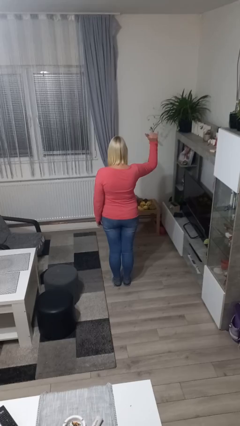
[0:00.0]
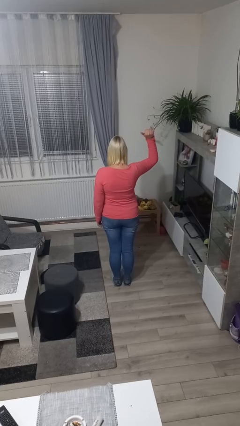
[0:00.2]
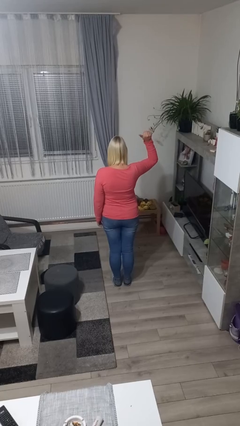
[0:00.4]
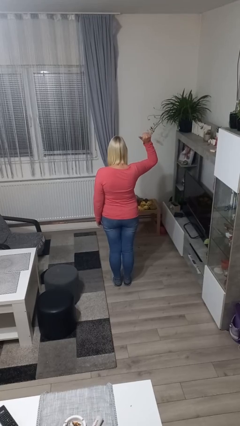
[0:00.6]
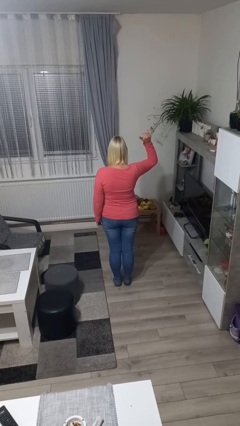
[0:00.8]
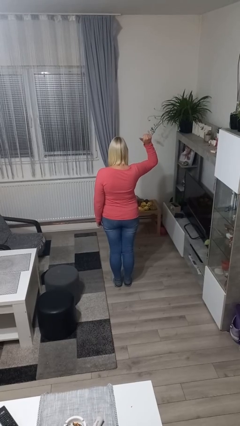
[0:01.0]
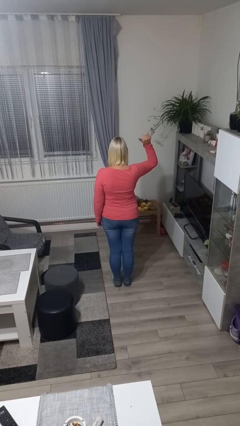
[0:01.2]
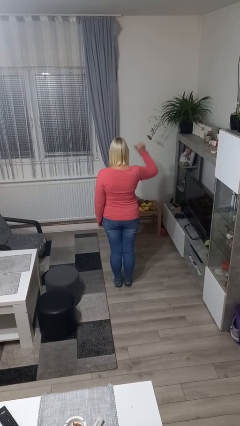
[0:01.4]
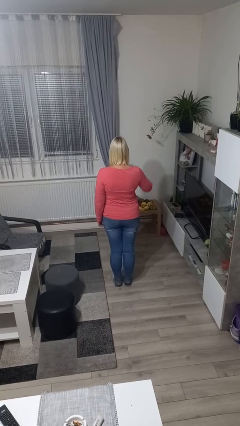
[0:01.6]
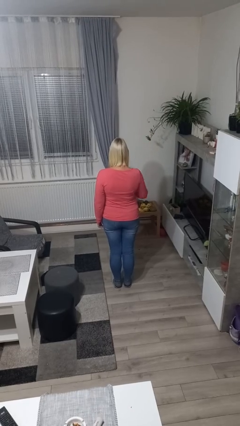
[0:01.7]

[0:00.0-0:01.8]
person gestures hang loose

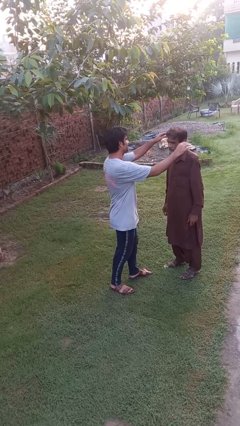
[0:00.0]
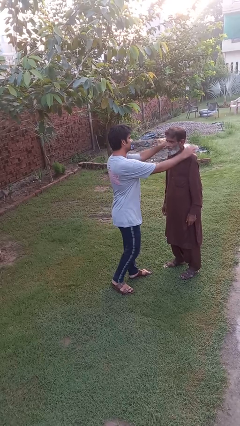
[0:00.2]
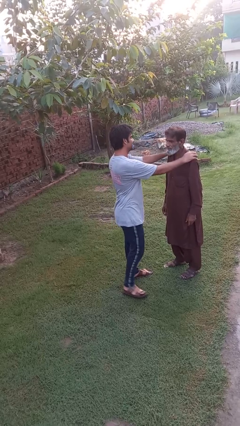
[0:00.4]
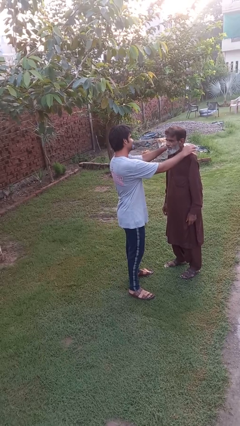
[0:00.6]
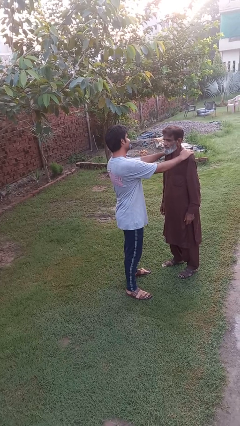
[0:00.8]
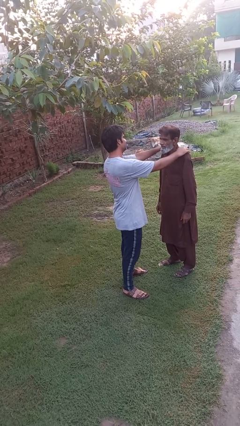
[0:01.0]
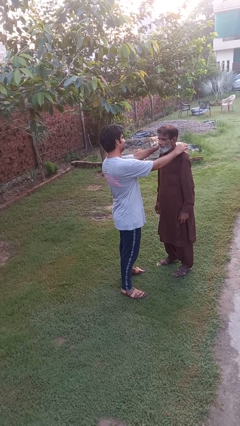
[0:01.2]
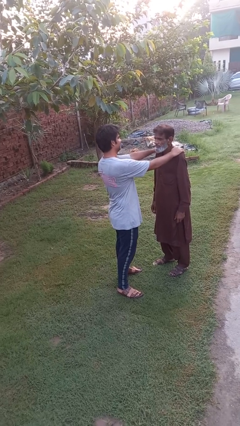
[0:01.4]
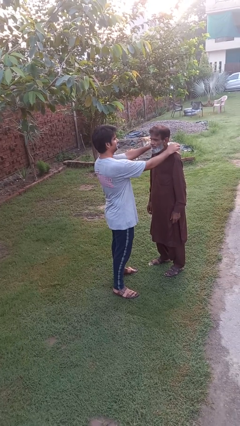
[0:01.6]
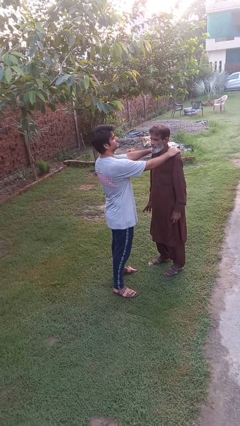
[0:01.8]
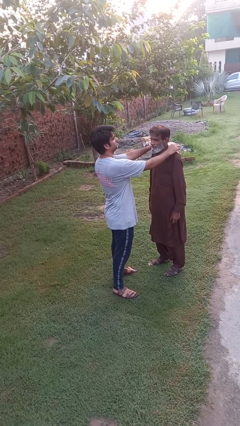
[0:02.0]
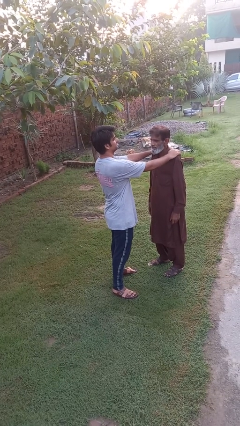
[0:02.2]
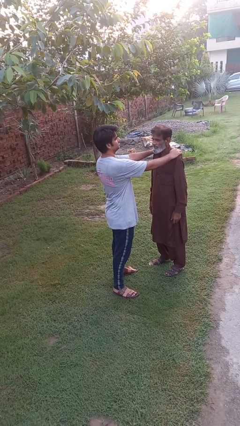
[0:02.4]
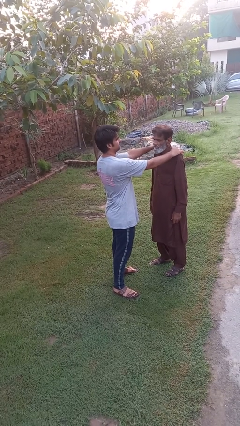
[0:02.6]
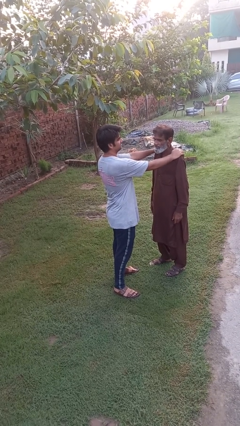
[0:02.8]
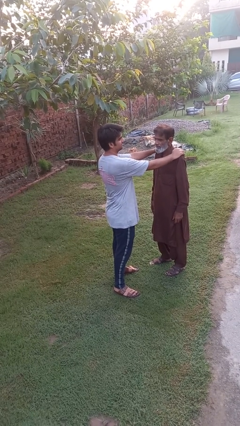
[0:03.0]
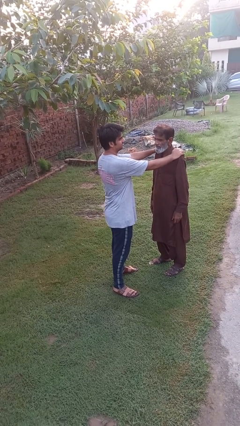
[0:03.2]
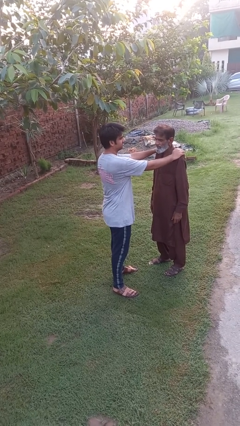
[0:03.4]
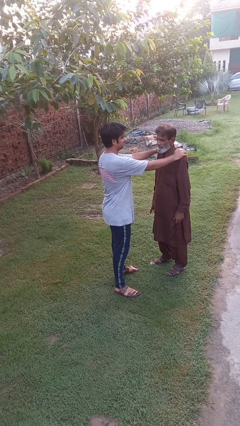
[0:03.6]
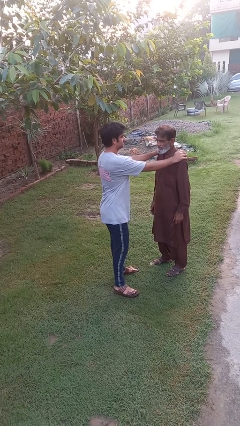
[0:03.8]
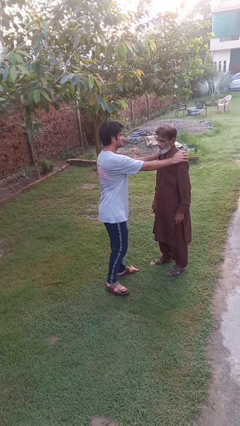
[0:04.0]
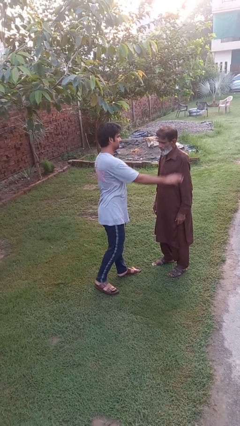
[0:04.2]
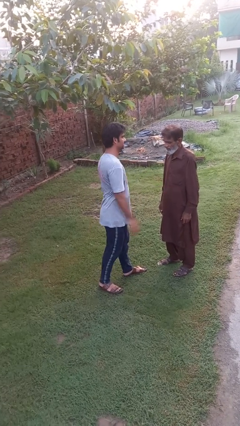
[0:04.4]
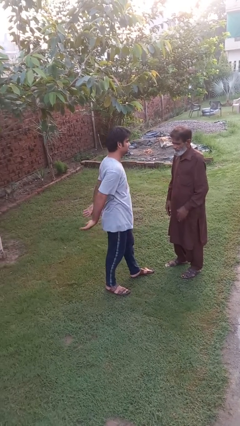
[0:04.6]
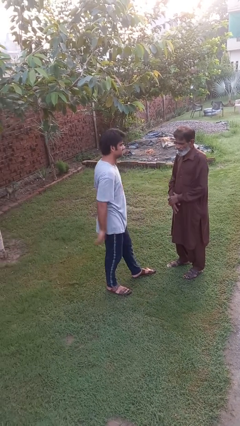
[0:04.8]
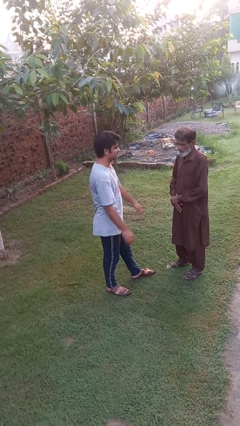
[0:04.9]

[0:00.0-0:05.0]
person pounds shoulders of person

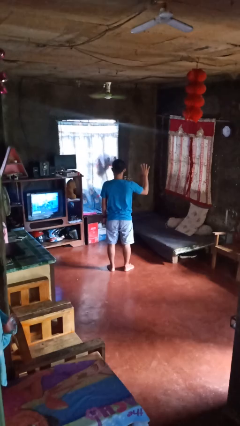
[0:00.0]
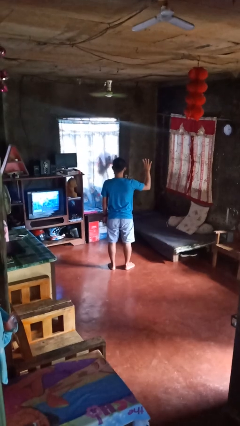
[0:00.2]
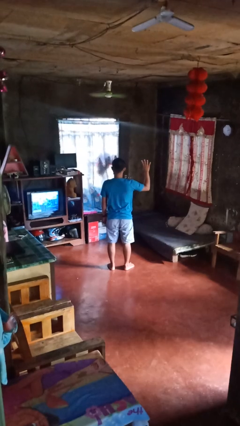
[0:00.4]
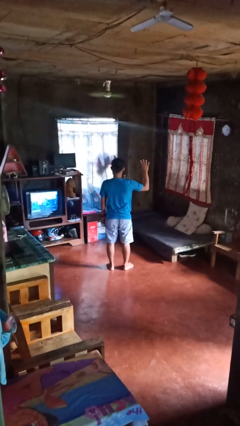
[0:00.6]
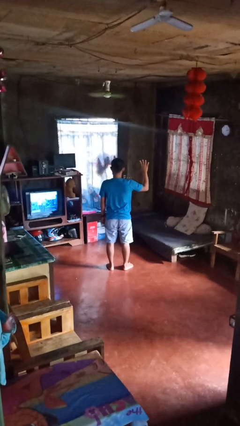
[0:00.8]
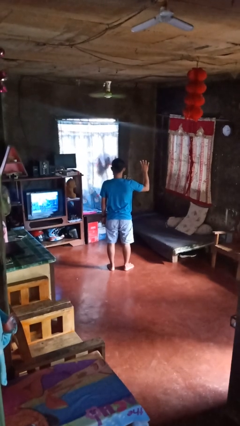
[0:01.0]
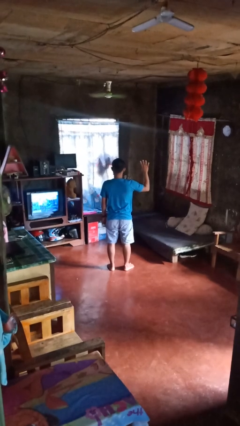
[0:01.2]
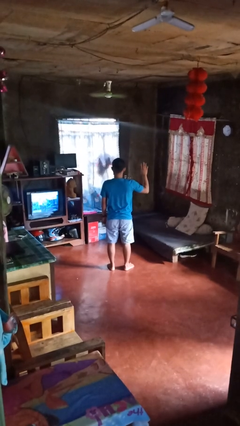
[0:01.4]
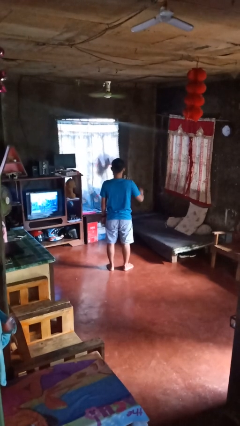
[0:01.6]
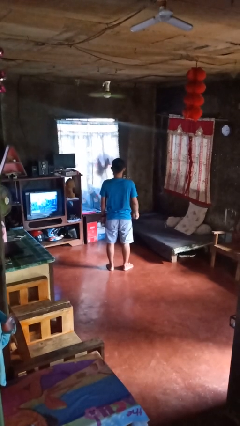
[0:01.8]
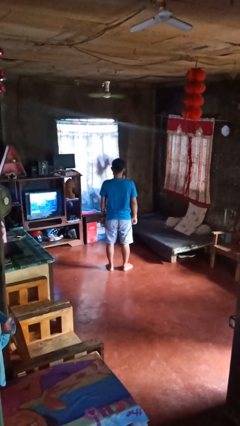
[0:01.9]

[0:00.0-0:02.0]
person gestures number four

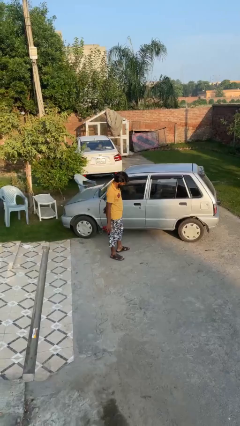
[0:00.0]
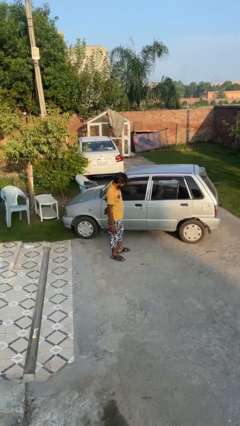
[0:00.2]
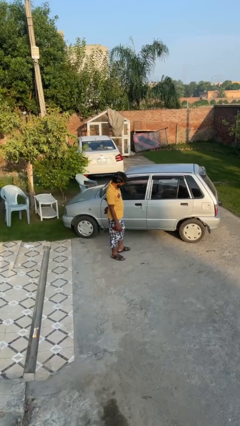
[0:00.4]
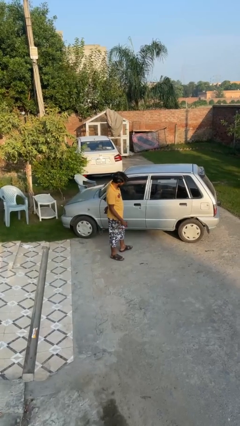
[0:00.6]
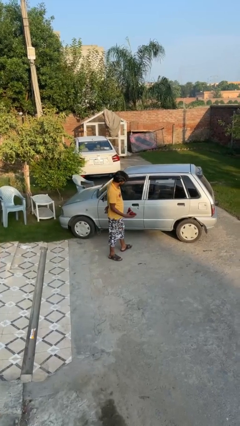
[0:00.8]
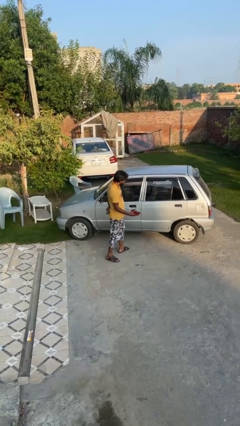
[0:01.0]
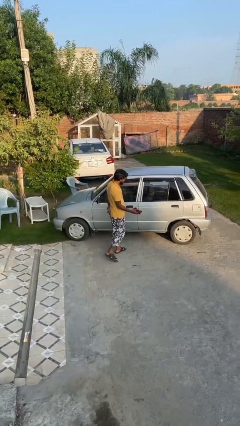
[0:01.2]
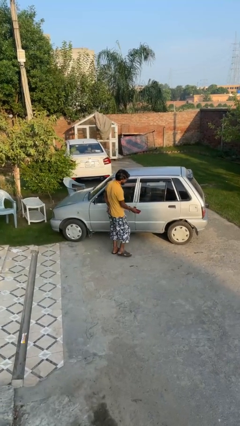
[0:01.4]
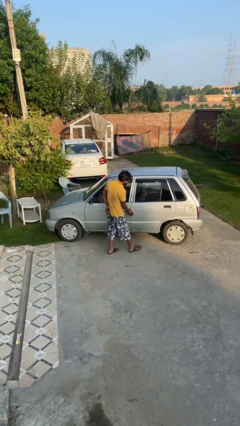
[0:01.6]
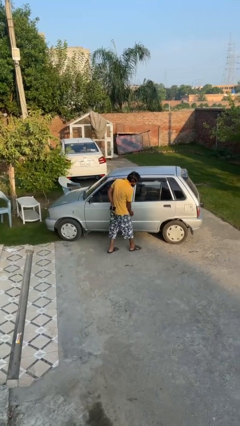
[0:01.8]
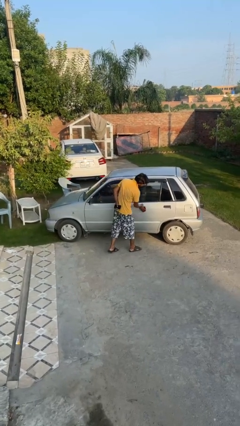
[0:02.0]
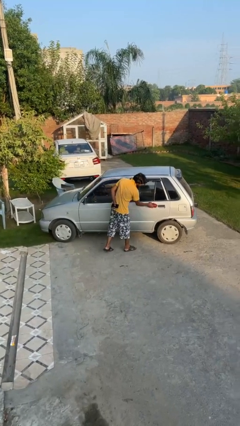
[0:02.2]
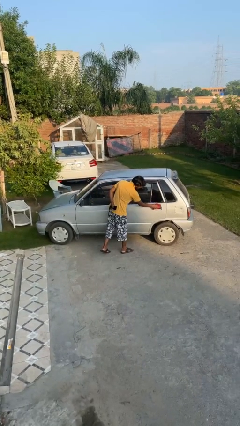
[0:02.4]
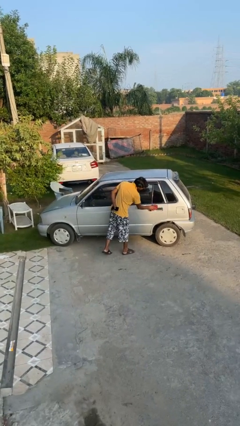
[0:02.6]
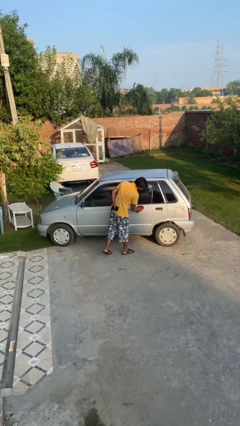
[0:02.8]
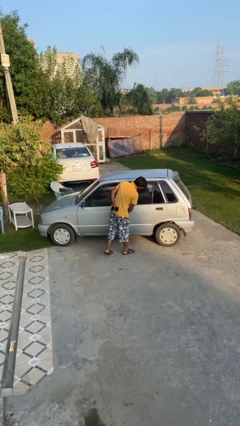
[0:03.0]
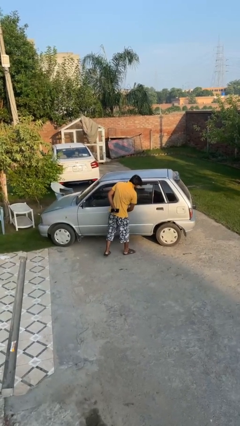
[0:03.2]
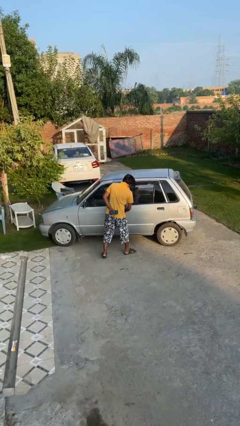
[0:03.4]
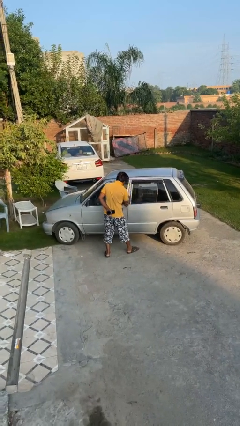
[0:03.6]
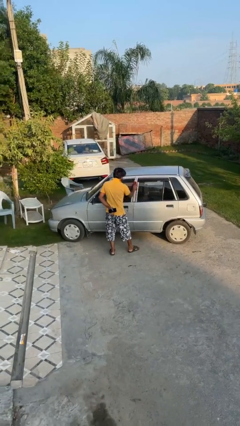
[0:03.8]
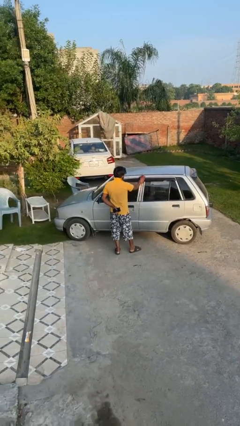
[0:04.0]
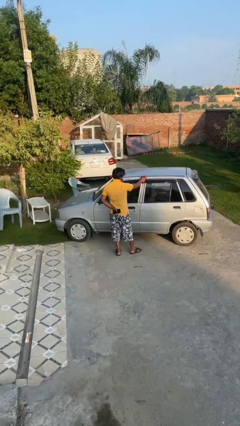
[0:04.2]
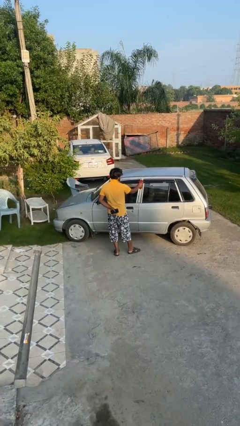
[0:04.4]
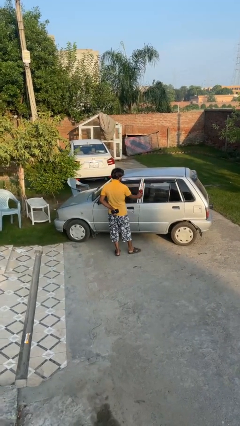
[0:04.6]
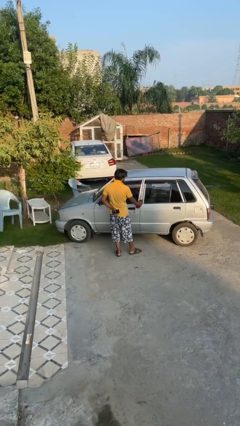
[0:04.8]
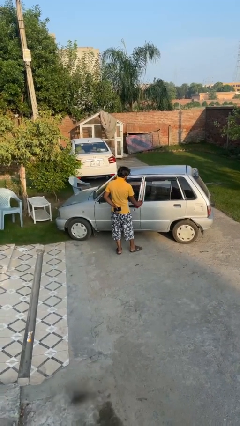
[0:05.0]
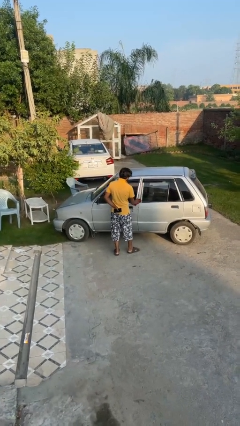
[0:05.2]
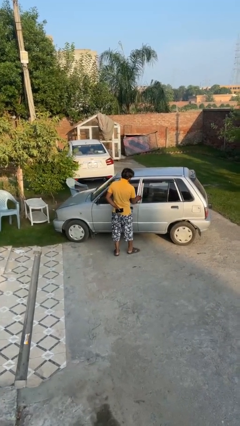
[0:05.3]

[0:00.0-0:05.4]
person polishes car with rag

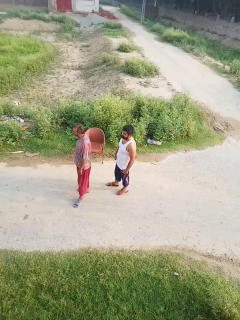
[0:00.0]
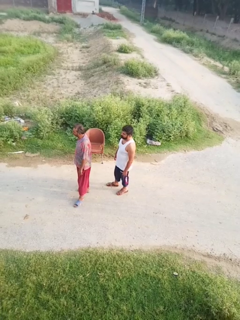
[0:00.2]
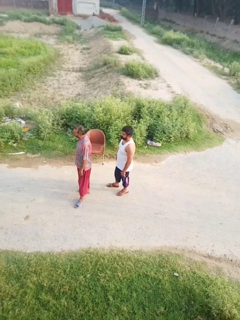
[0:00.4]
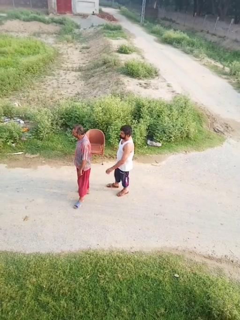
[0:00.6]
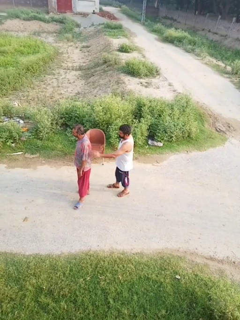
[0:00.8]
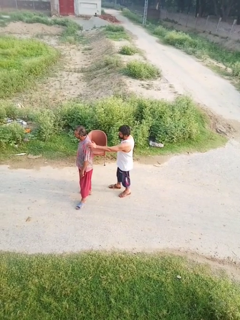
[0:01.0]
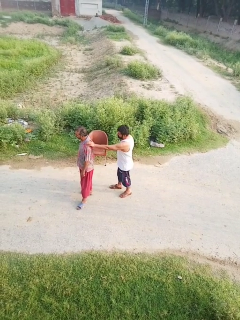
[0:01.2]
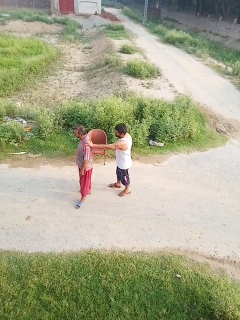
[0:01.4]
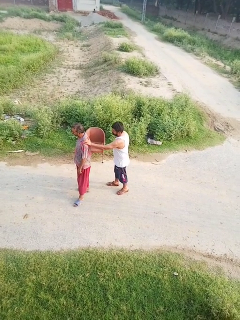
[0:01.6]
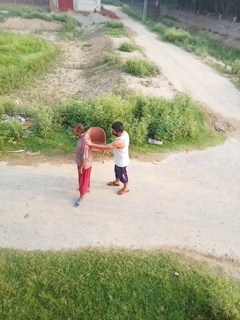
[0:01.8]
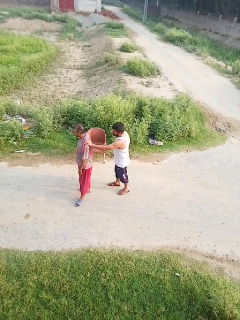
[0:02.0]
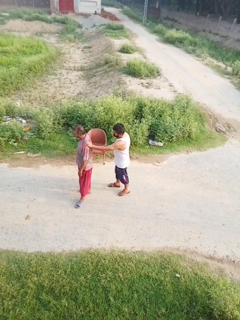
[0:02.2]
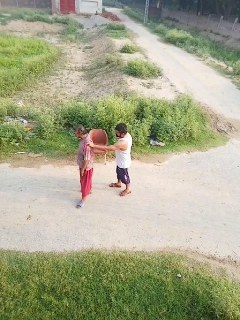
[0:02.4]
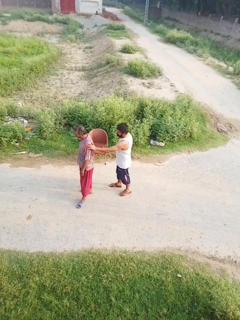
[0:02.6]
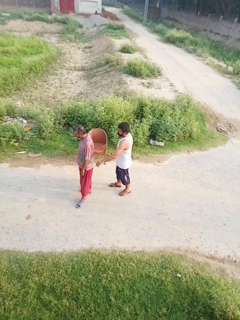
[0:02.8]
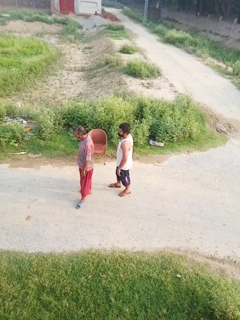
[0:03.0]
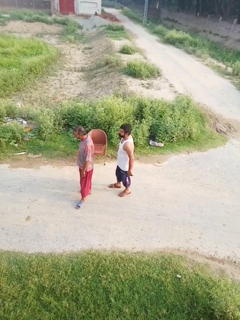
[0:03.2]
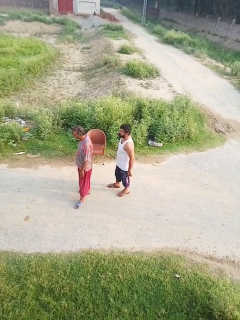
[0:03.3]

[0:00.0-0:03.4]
person touches back of person

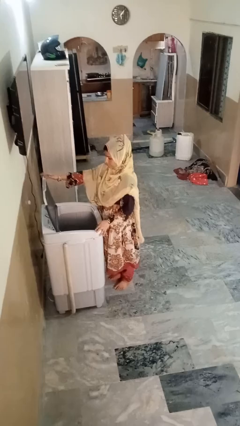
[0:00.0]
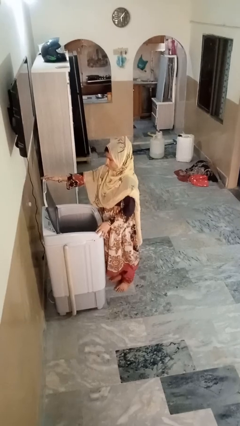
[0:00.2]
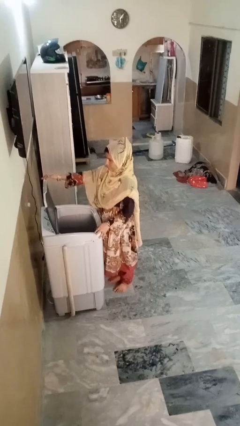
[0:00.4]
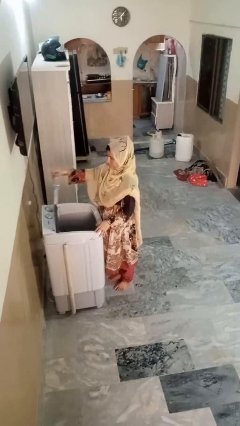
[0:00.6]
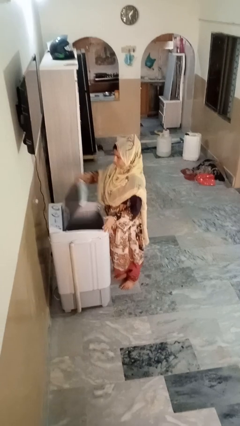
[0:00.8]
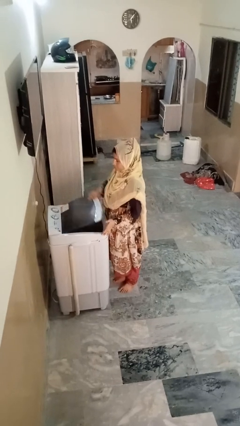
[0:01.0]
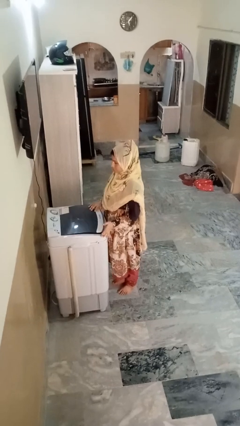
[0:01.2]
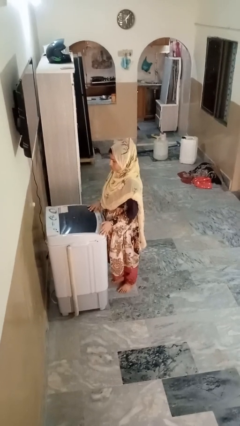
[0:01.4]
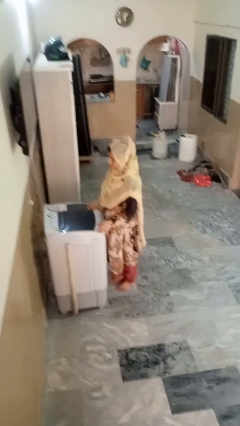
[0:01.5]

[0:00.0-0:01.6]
person closes clothes washer
